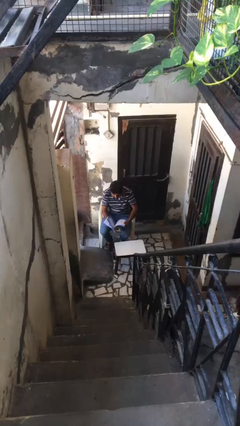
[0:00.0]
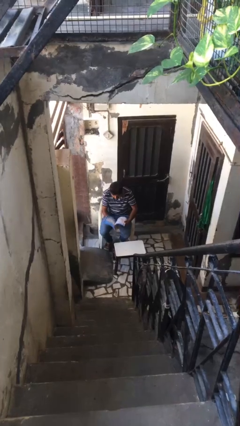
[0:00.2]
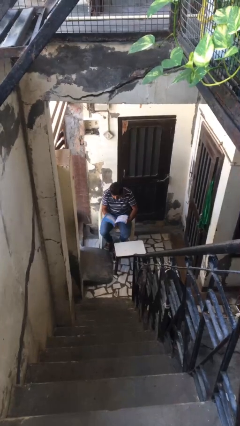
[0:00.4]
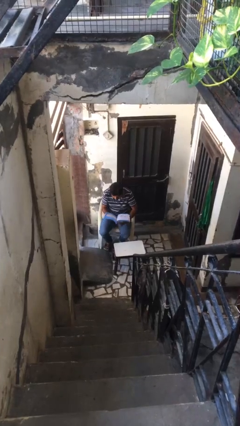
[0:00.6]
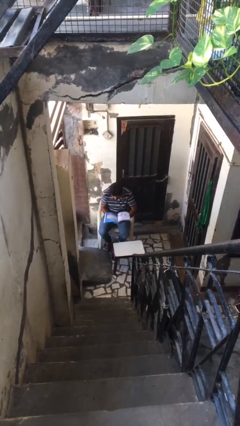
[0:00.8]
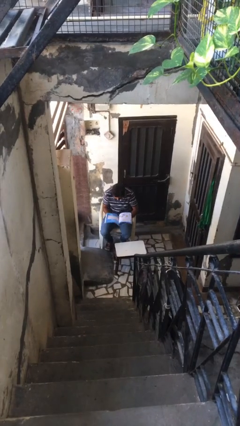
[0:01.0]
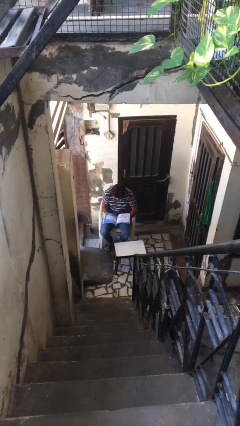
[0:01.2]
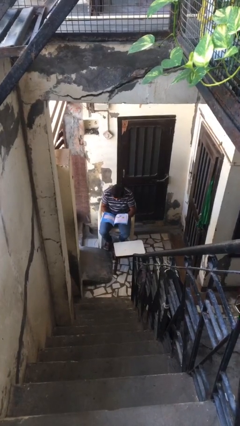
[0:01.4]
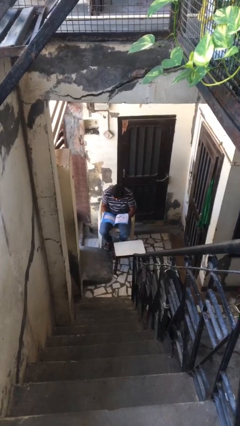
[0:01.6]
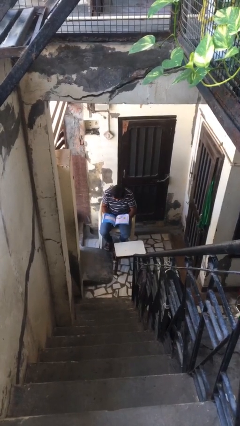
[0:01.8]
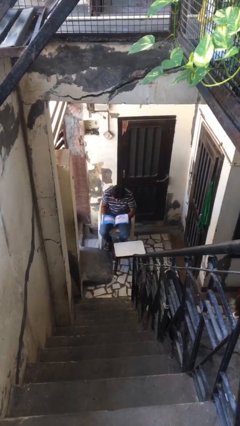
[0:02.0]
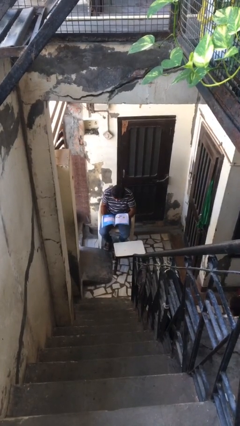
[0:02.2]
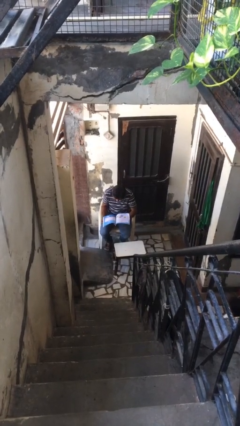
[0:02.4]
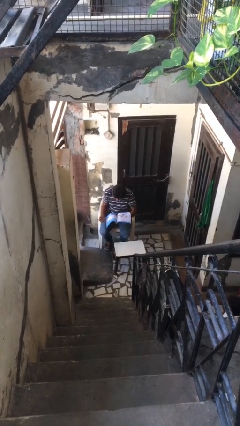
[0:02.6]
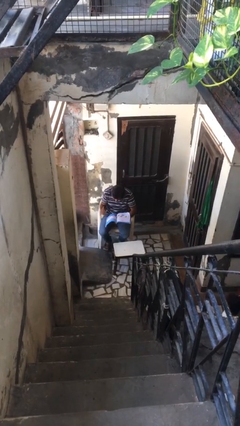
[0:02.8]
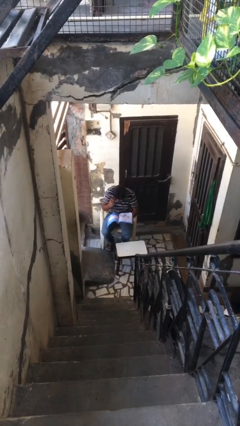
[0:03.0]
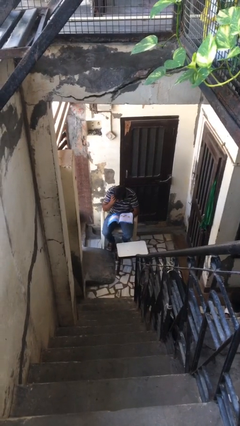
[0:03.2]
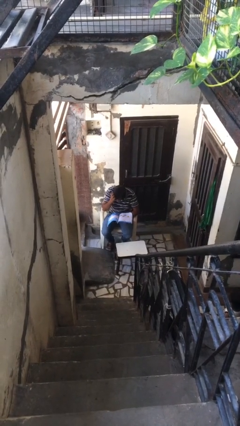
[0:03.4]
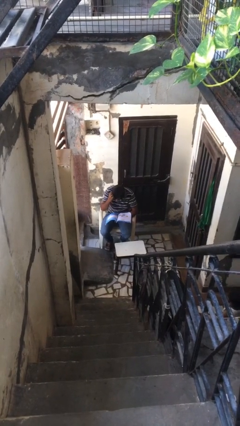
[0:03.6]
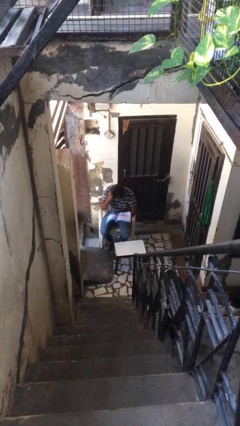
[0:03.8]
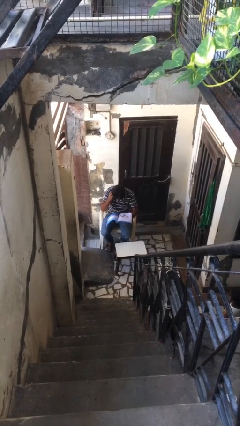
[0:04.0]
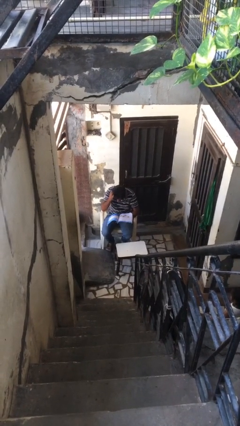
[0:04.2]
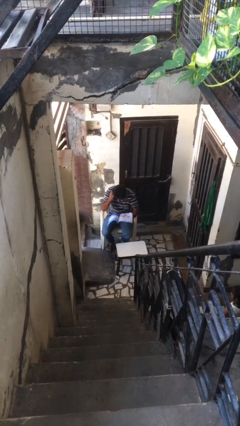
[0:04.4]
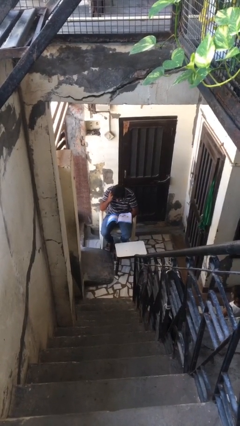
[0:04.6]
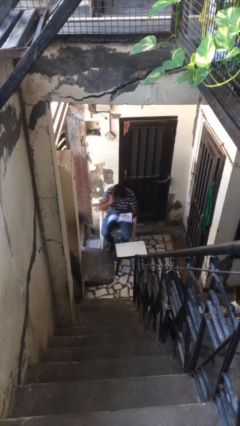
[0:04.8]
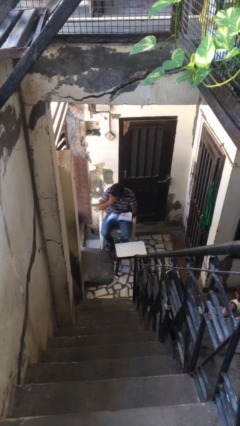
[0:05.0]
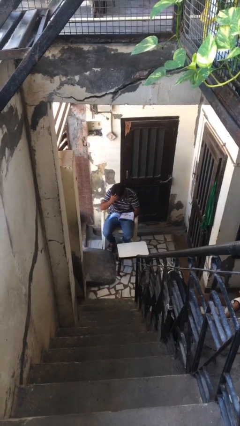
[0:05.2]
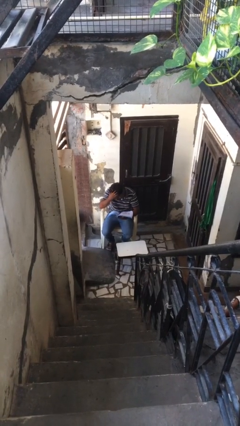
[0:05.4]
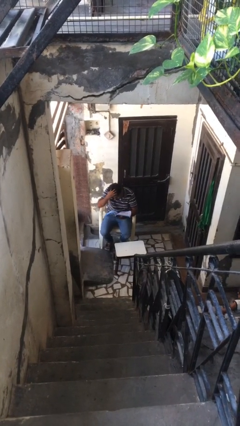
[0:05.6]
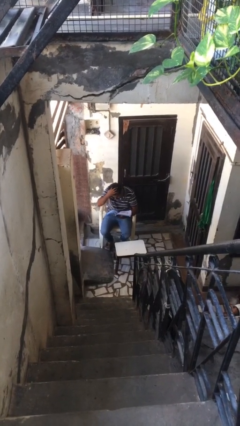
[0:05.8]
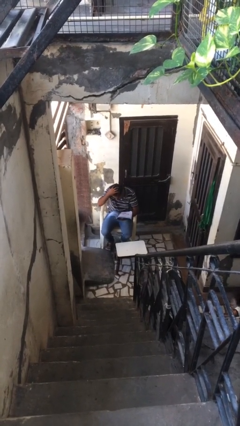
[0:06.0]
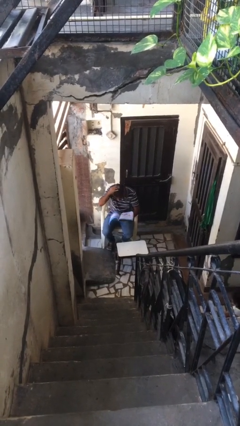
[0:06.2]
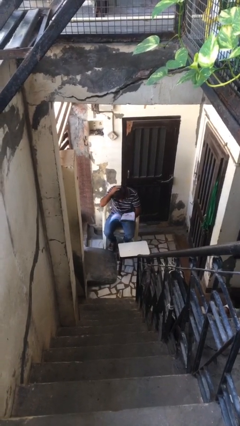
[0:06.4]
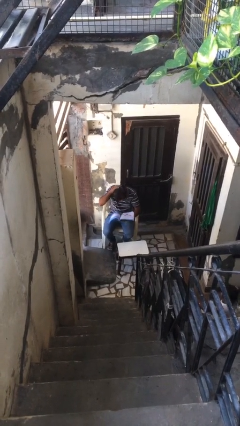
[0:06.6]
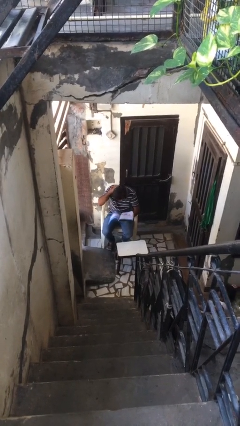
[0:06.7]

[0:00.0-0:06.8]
person reads document

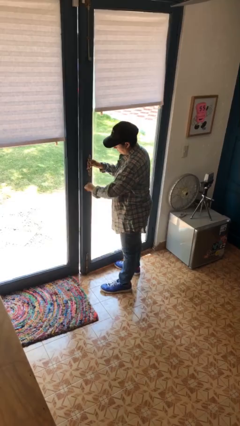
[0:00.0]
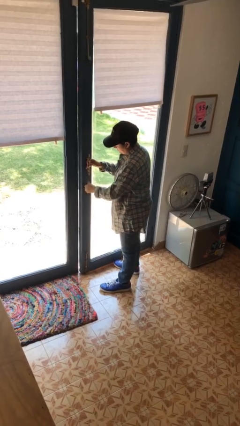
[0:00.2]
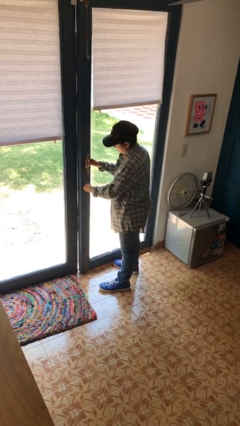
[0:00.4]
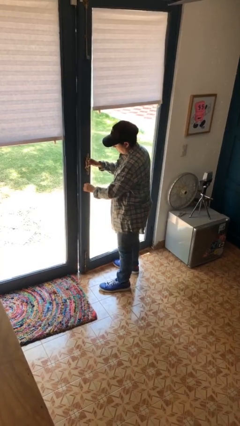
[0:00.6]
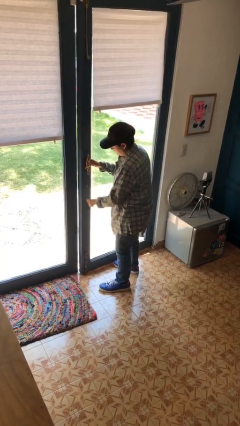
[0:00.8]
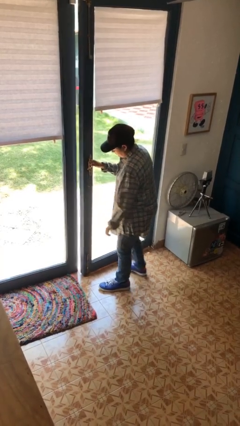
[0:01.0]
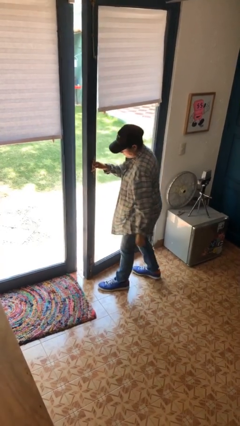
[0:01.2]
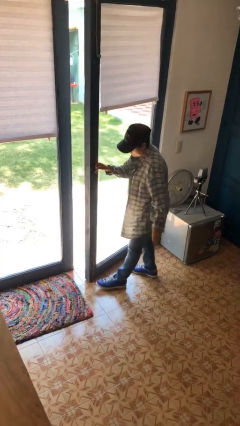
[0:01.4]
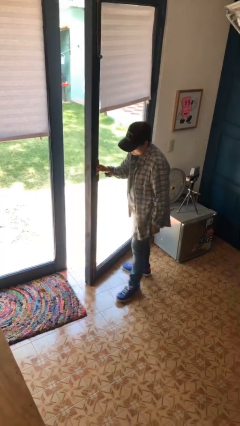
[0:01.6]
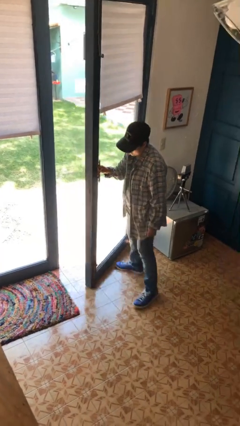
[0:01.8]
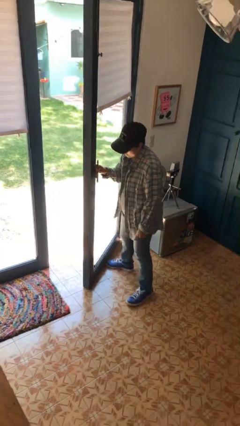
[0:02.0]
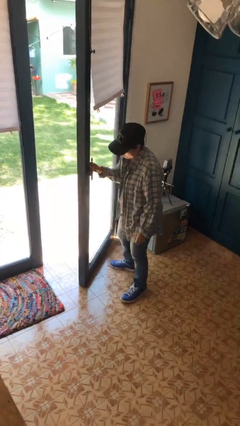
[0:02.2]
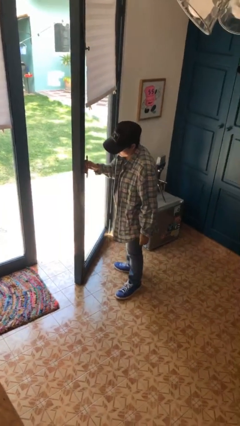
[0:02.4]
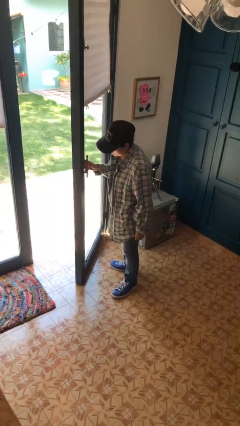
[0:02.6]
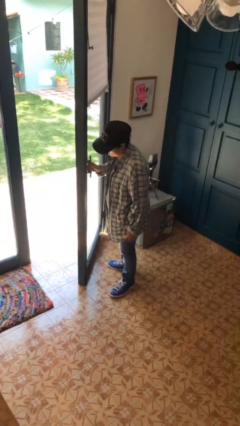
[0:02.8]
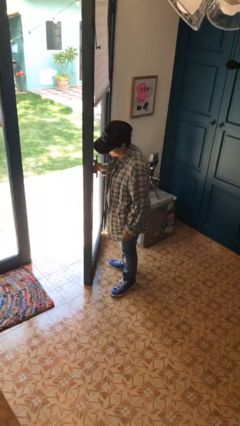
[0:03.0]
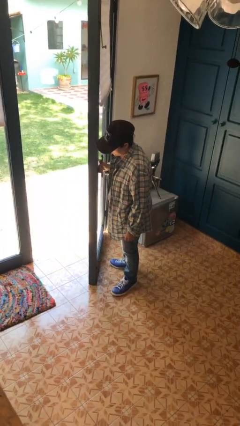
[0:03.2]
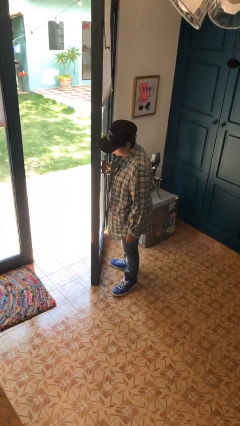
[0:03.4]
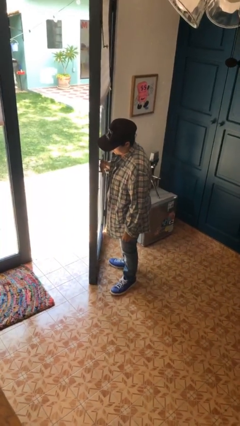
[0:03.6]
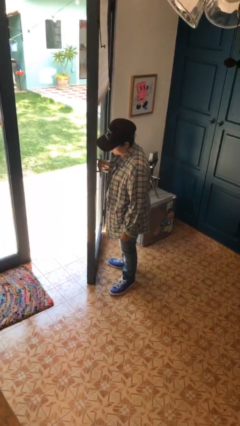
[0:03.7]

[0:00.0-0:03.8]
person opens facility door

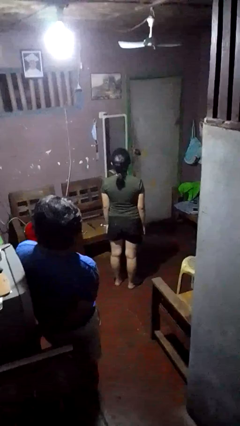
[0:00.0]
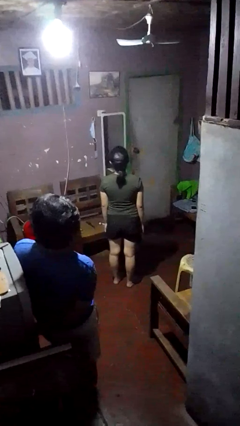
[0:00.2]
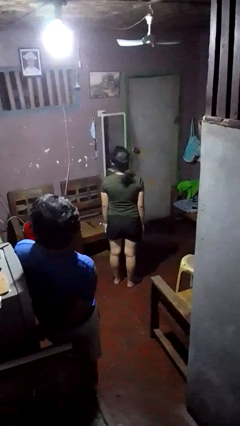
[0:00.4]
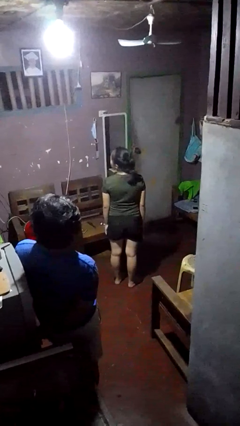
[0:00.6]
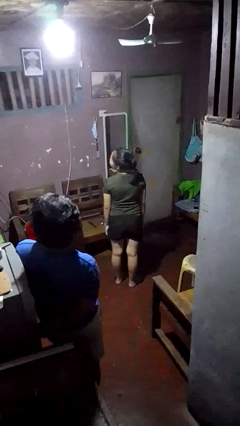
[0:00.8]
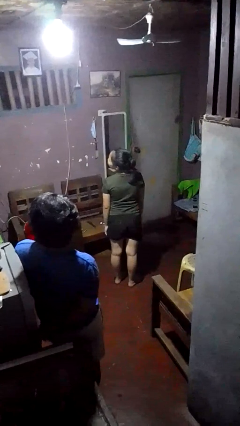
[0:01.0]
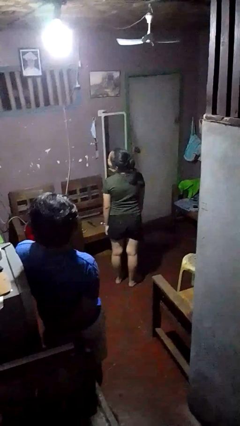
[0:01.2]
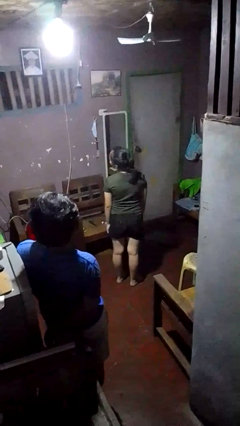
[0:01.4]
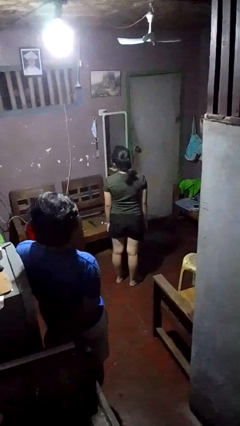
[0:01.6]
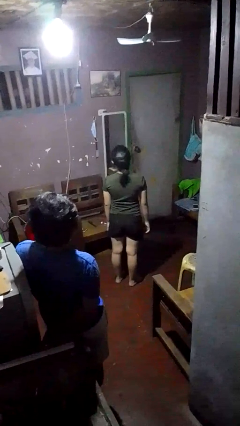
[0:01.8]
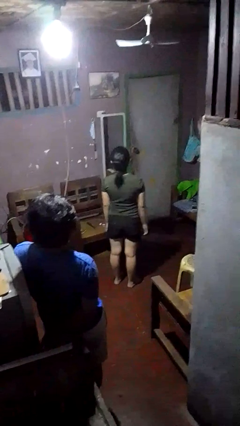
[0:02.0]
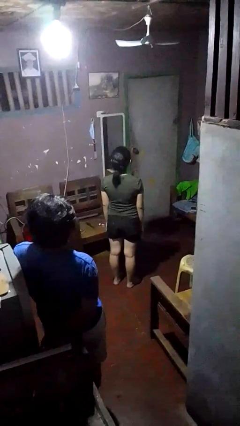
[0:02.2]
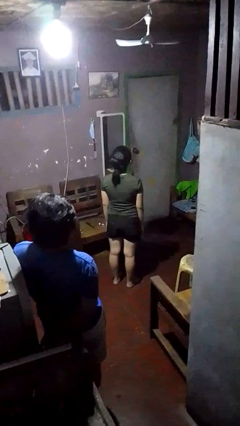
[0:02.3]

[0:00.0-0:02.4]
person looks over shoulder

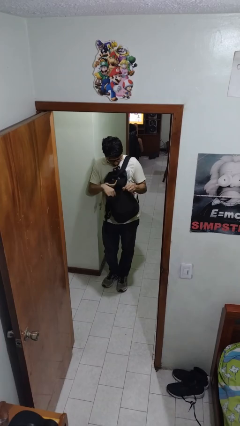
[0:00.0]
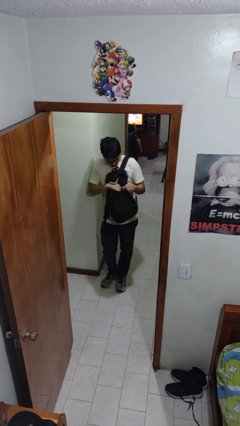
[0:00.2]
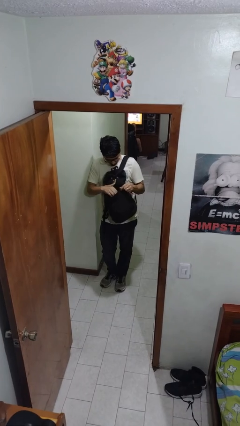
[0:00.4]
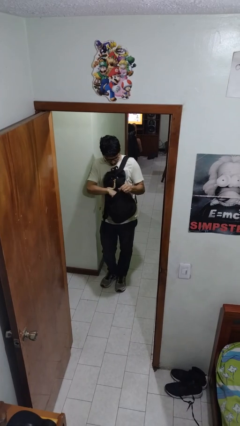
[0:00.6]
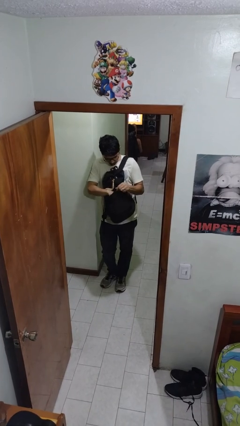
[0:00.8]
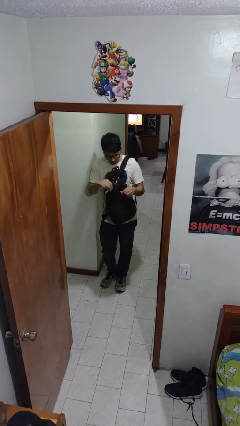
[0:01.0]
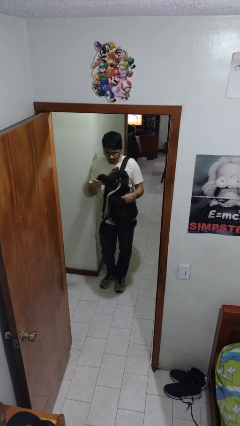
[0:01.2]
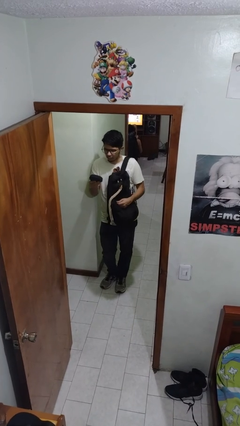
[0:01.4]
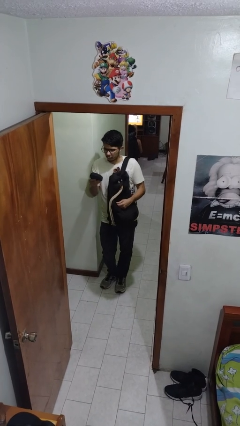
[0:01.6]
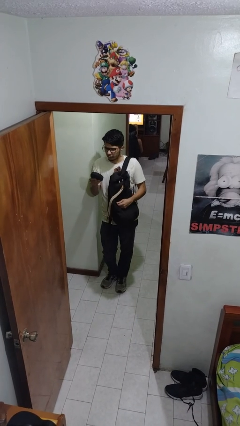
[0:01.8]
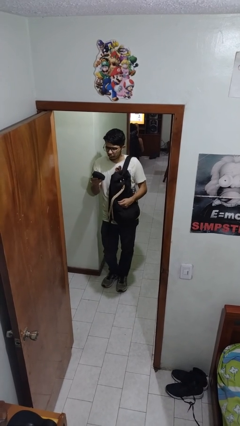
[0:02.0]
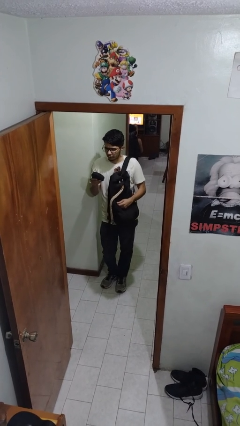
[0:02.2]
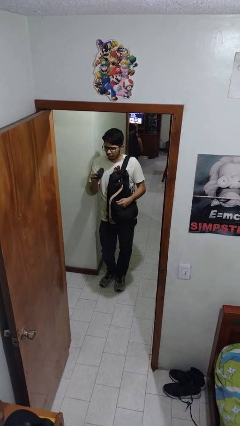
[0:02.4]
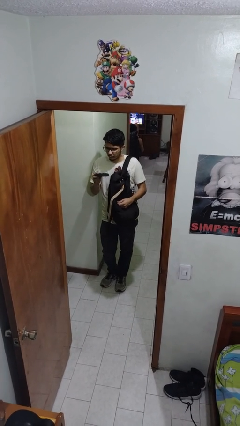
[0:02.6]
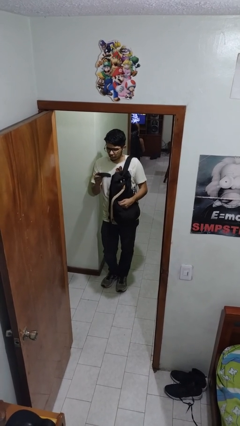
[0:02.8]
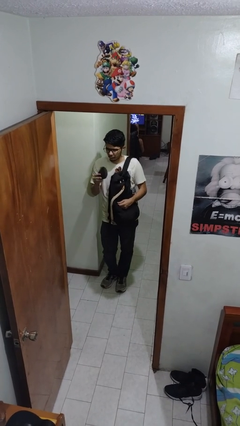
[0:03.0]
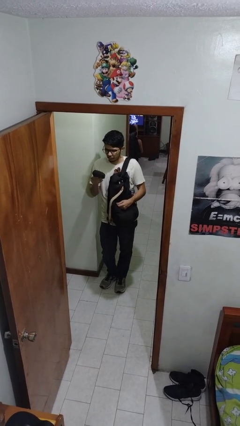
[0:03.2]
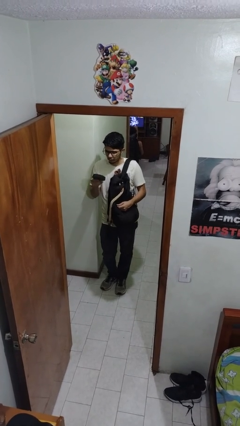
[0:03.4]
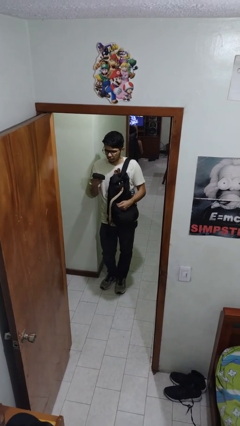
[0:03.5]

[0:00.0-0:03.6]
person takes object from backpack

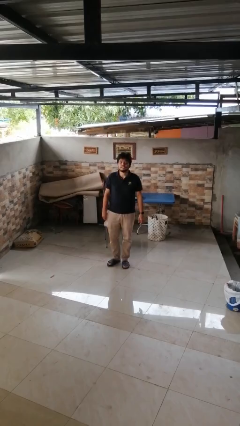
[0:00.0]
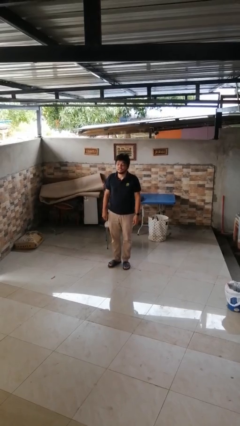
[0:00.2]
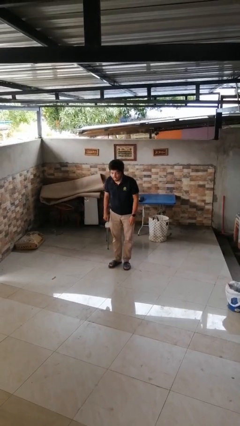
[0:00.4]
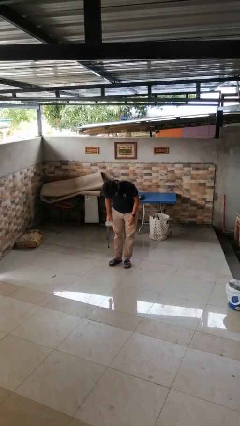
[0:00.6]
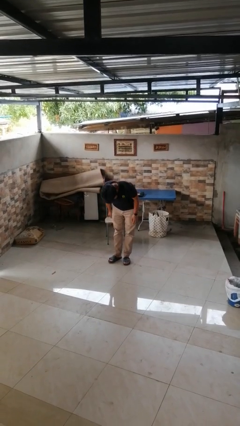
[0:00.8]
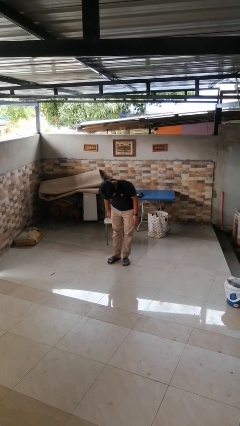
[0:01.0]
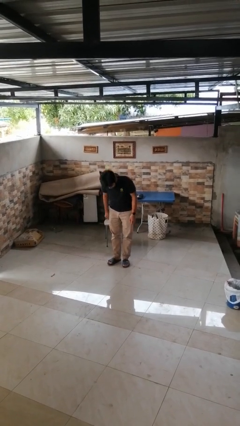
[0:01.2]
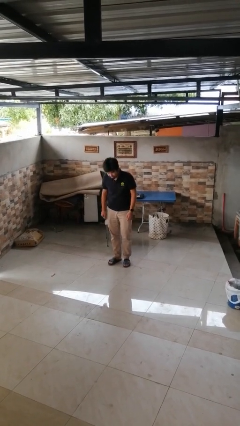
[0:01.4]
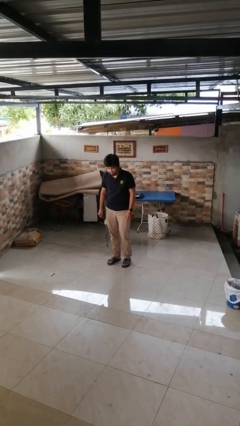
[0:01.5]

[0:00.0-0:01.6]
person bows
